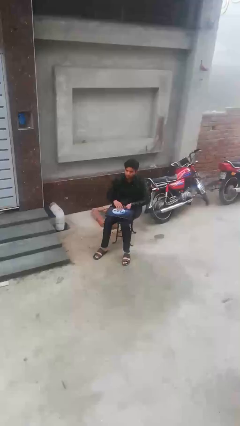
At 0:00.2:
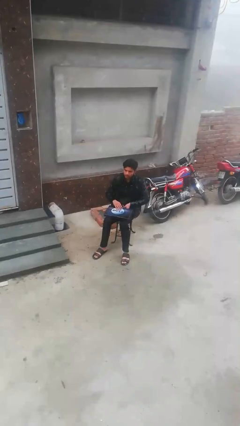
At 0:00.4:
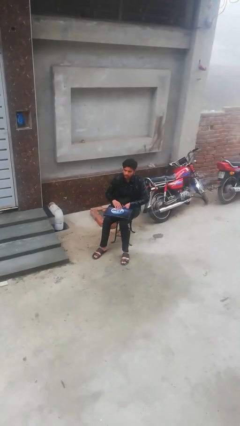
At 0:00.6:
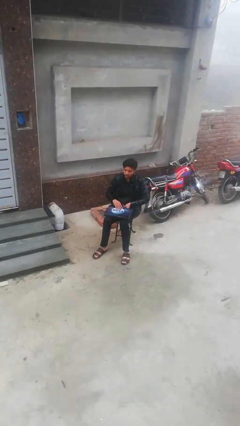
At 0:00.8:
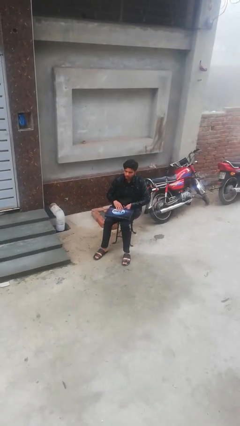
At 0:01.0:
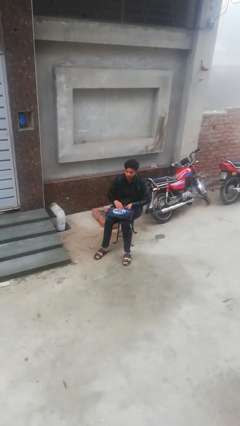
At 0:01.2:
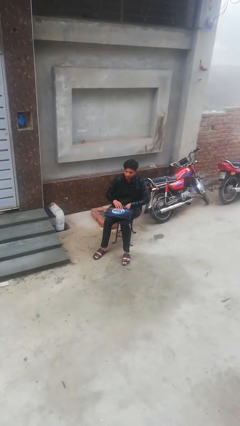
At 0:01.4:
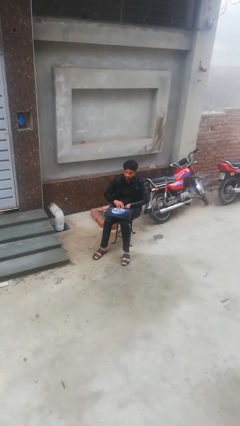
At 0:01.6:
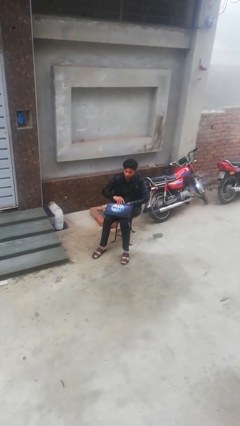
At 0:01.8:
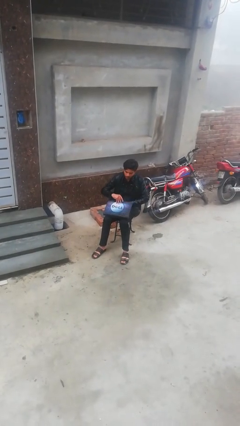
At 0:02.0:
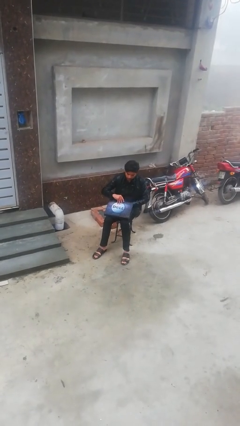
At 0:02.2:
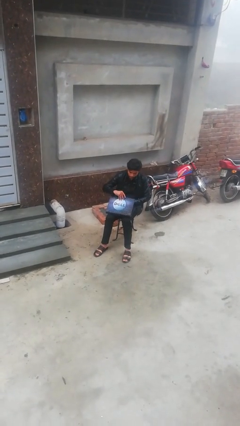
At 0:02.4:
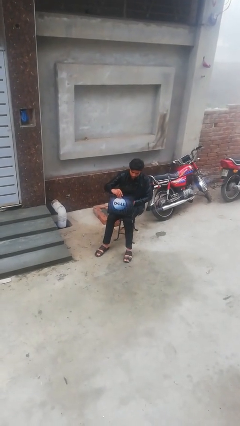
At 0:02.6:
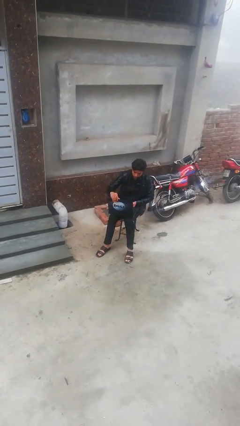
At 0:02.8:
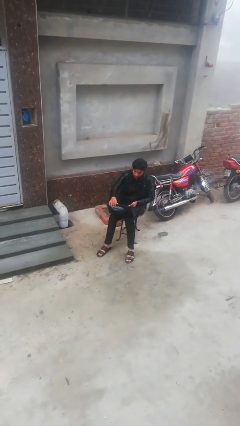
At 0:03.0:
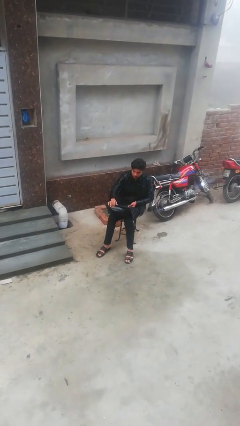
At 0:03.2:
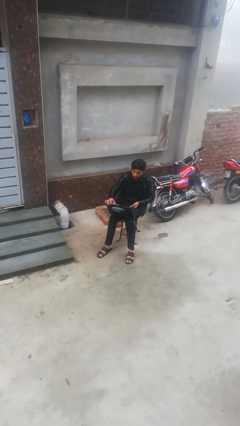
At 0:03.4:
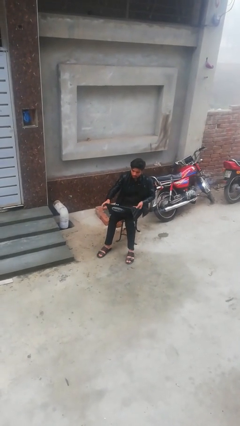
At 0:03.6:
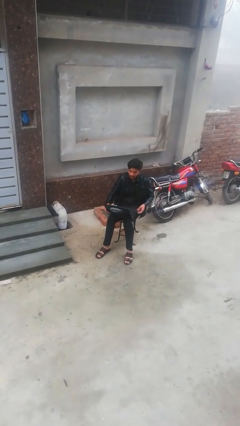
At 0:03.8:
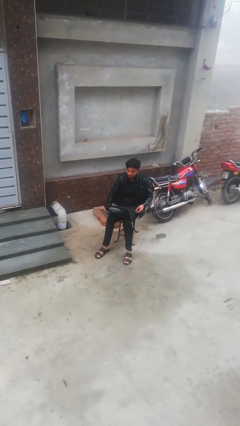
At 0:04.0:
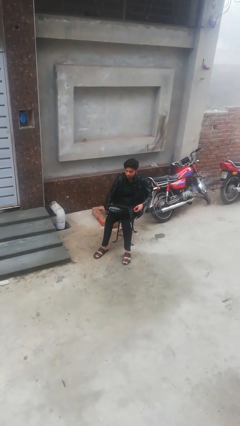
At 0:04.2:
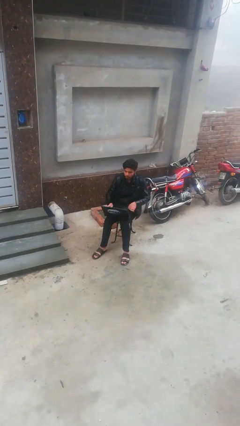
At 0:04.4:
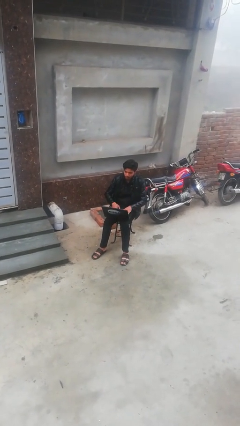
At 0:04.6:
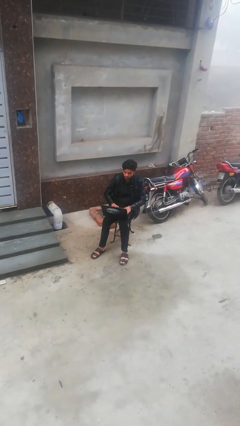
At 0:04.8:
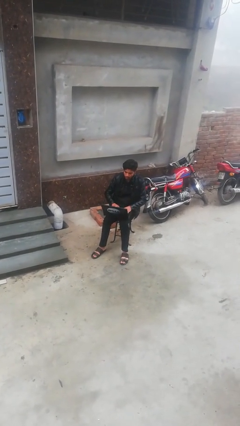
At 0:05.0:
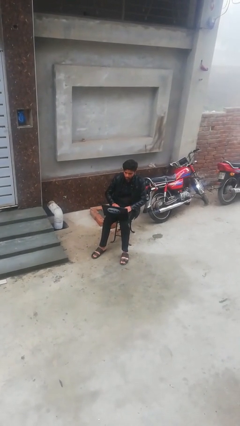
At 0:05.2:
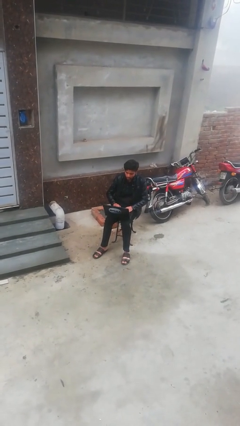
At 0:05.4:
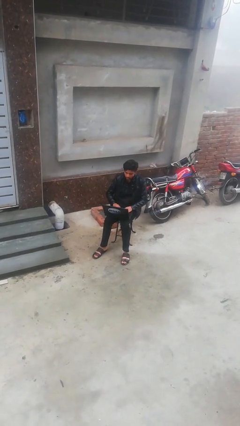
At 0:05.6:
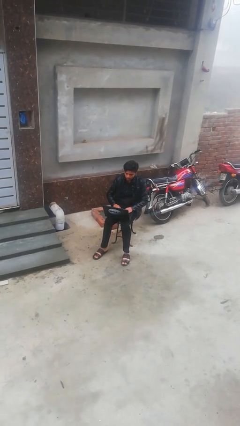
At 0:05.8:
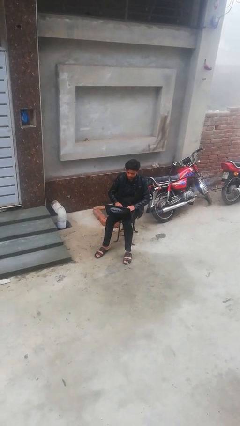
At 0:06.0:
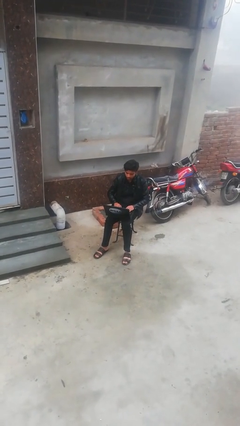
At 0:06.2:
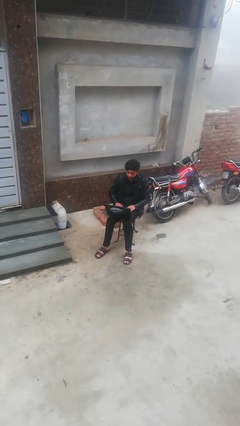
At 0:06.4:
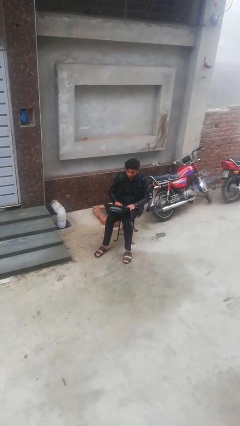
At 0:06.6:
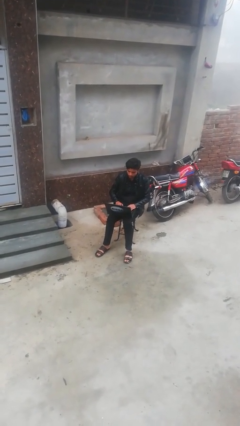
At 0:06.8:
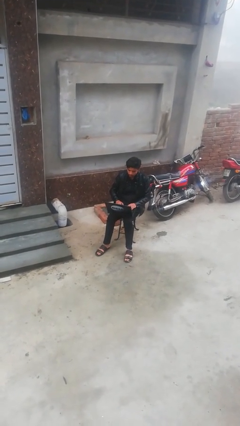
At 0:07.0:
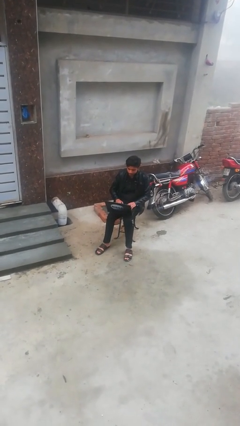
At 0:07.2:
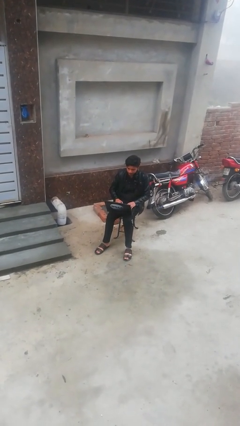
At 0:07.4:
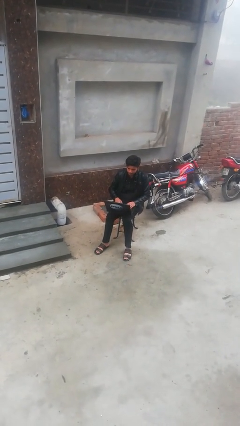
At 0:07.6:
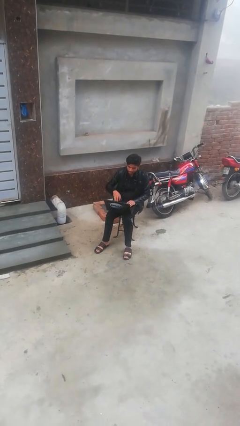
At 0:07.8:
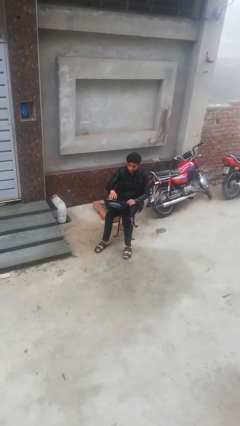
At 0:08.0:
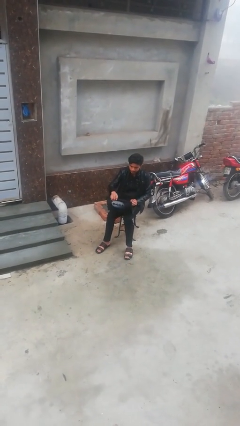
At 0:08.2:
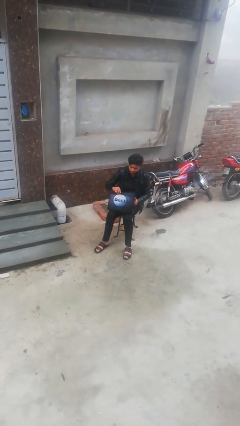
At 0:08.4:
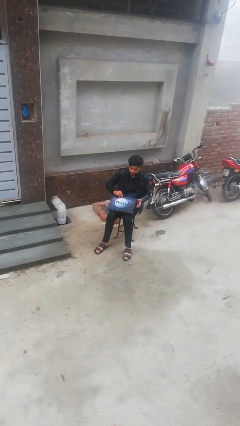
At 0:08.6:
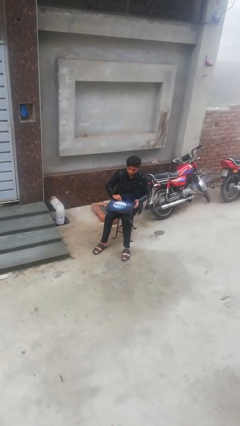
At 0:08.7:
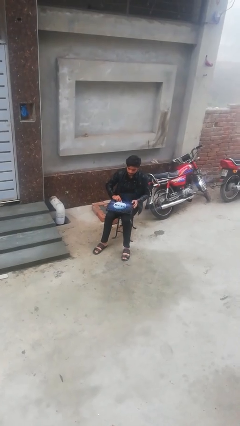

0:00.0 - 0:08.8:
person interacts with laptop

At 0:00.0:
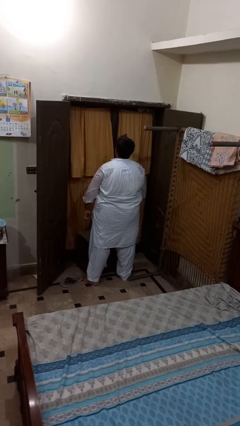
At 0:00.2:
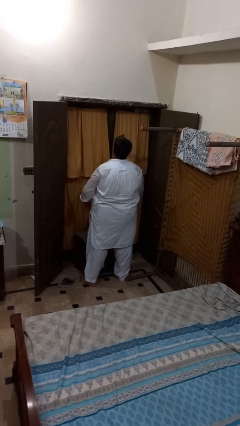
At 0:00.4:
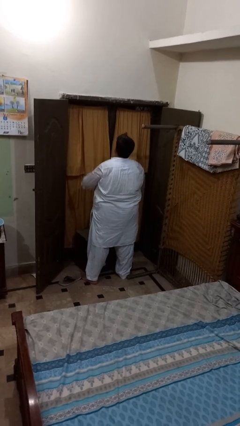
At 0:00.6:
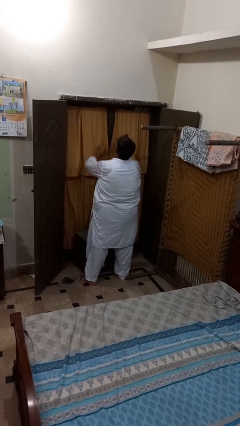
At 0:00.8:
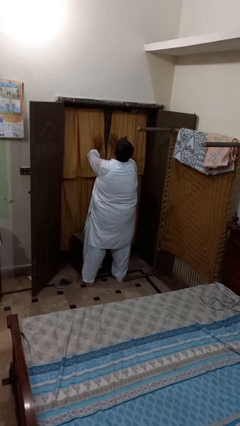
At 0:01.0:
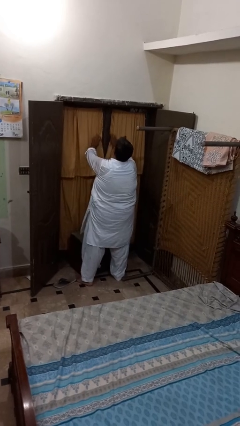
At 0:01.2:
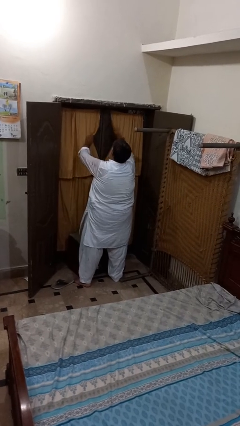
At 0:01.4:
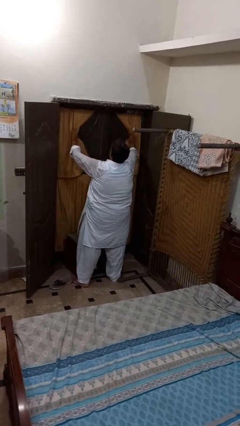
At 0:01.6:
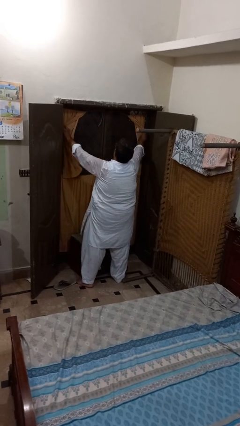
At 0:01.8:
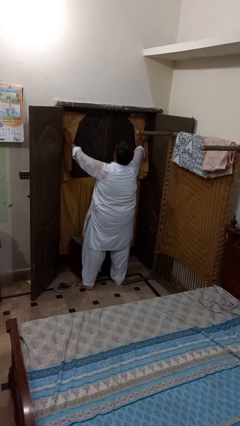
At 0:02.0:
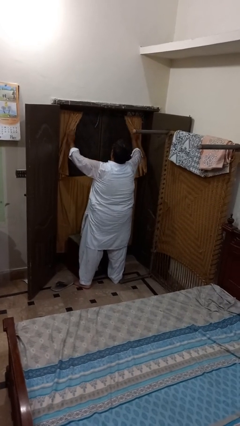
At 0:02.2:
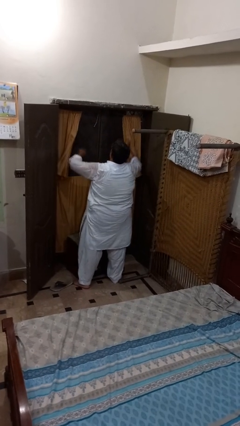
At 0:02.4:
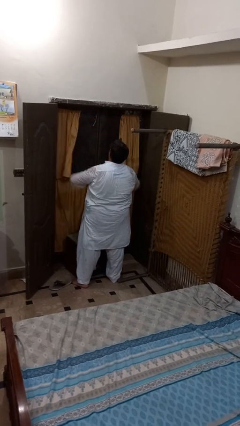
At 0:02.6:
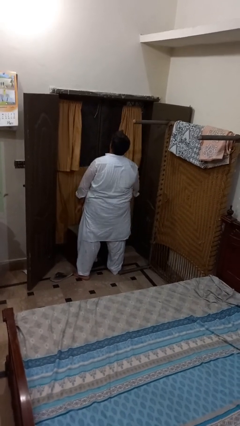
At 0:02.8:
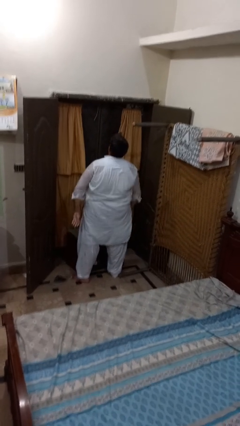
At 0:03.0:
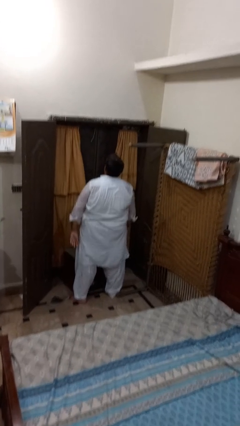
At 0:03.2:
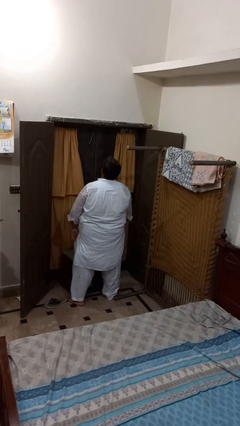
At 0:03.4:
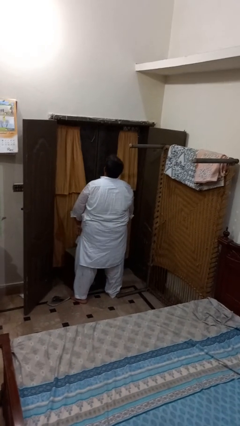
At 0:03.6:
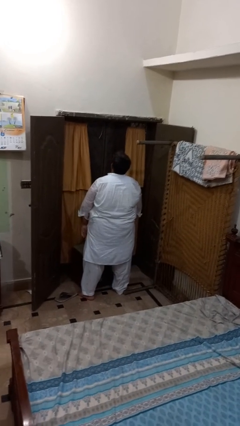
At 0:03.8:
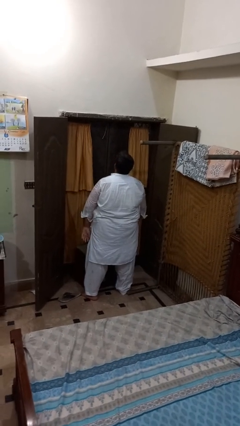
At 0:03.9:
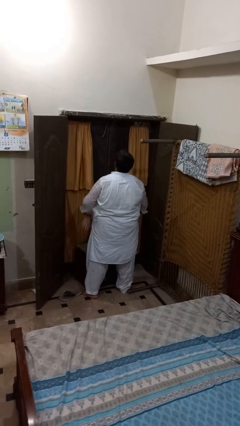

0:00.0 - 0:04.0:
person opens curtains

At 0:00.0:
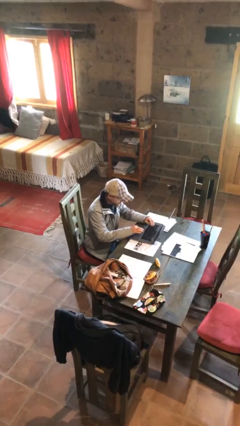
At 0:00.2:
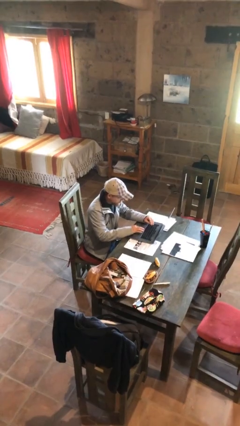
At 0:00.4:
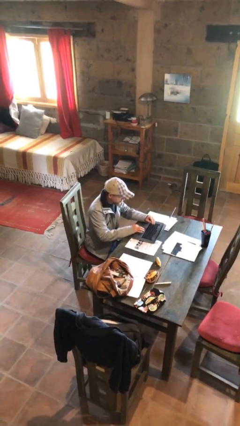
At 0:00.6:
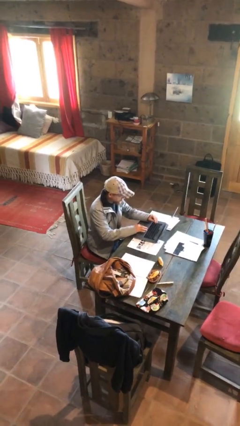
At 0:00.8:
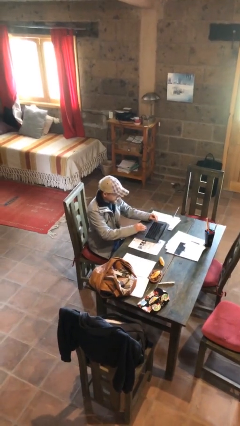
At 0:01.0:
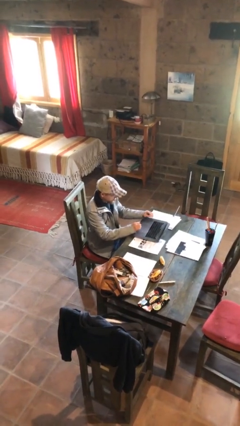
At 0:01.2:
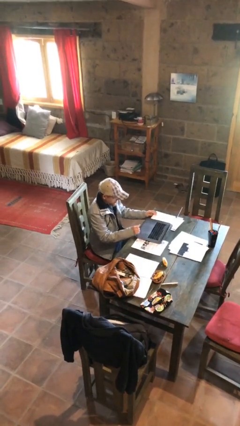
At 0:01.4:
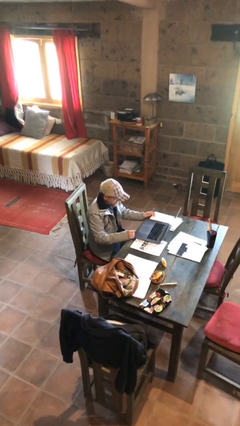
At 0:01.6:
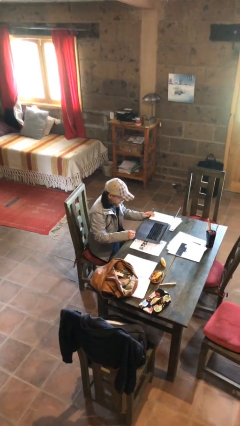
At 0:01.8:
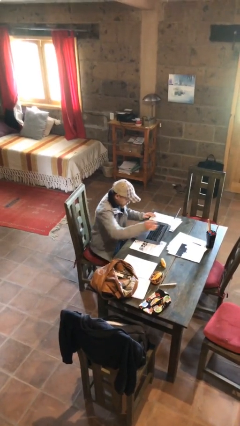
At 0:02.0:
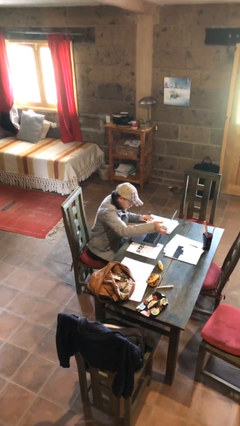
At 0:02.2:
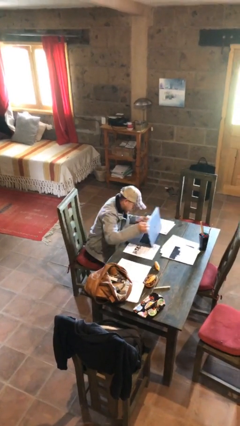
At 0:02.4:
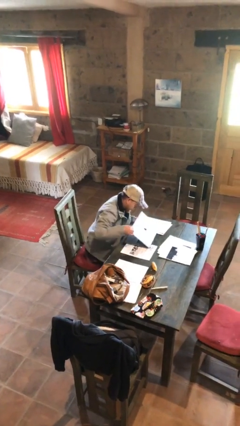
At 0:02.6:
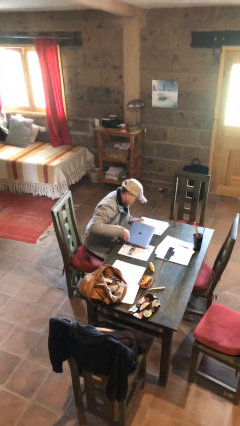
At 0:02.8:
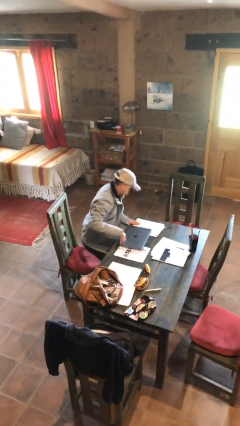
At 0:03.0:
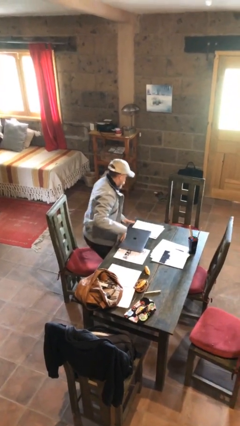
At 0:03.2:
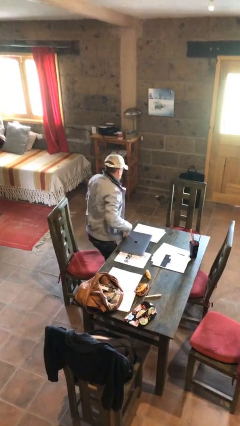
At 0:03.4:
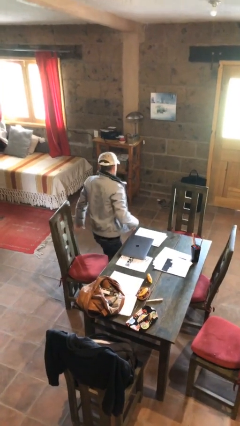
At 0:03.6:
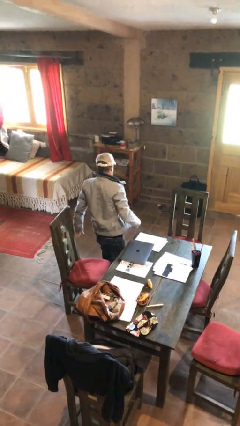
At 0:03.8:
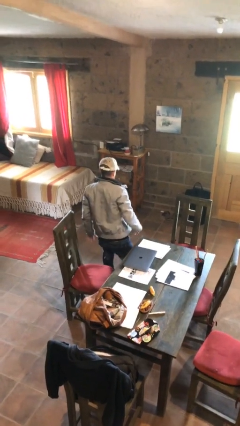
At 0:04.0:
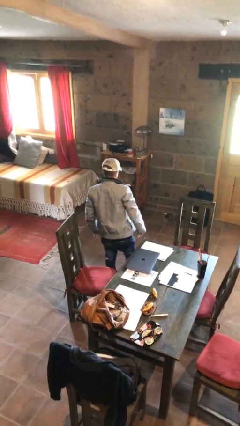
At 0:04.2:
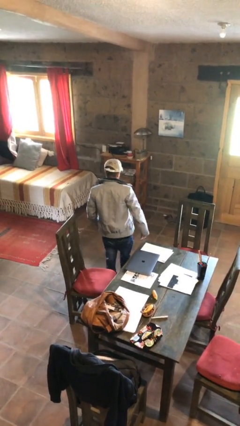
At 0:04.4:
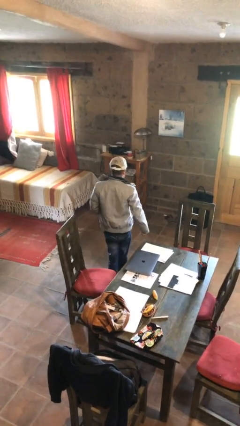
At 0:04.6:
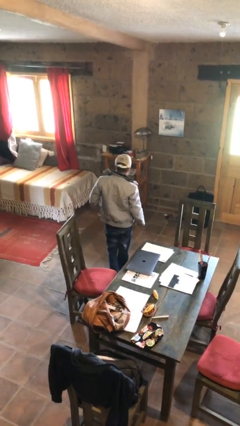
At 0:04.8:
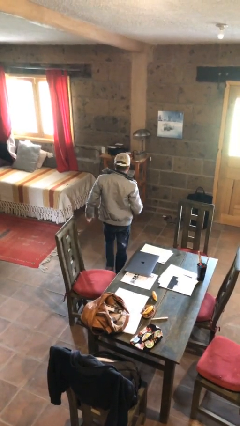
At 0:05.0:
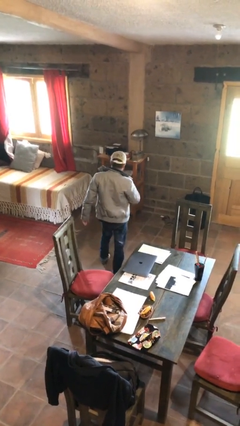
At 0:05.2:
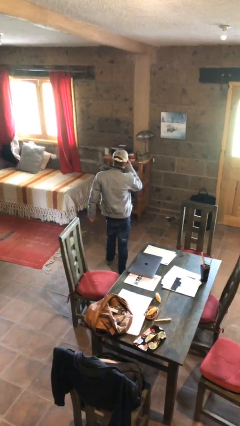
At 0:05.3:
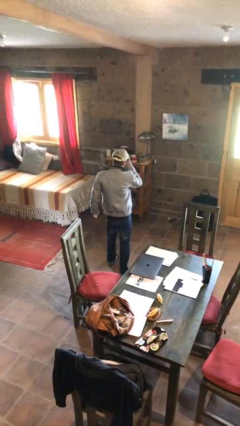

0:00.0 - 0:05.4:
person stands up
